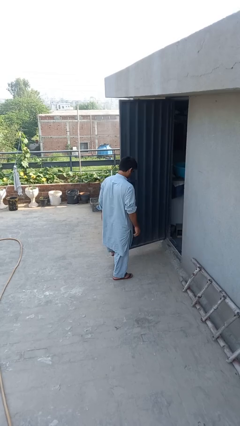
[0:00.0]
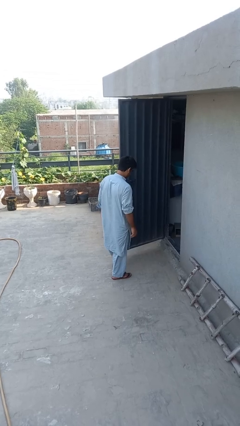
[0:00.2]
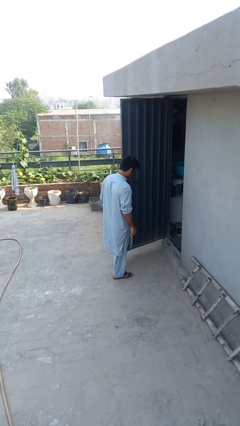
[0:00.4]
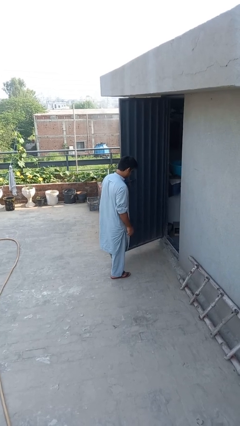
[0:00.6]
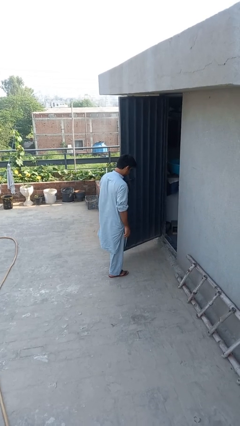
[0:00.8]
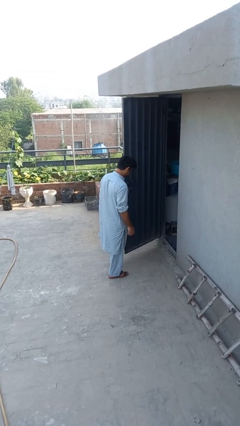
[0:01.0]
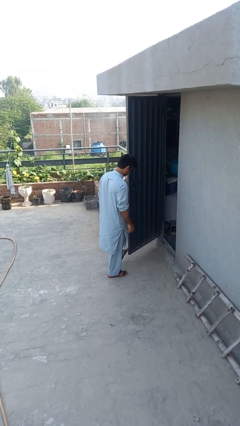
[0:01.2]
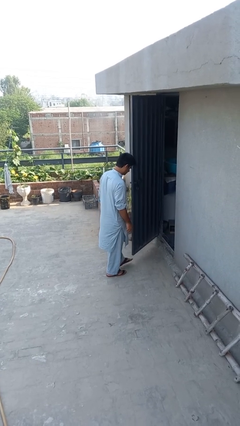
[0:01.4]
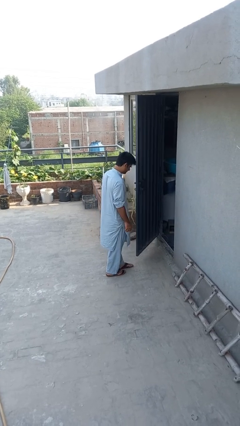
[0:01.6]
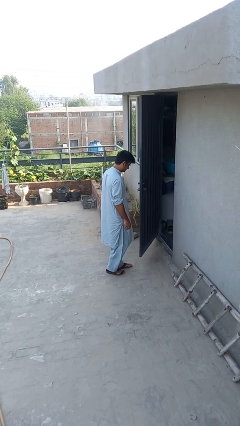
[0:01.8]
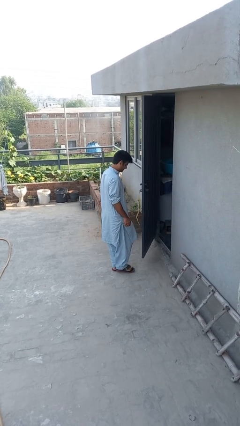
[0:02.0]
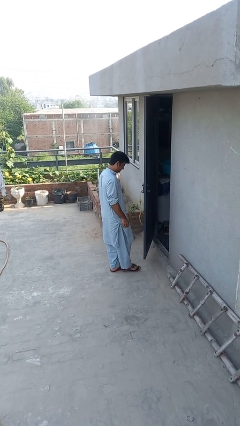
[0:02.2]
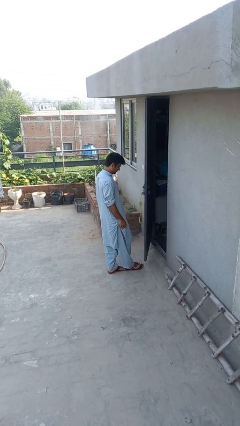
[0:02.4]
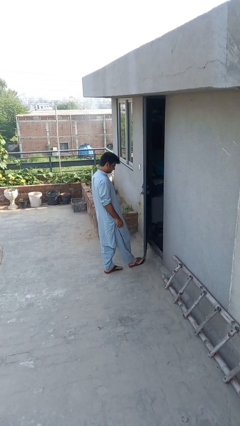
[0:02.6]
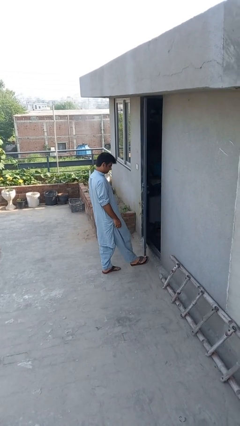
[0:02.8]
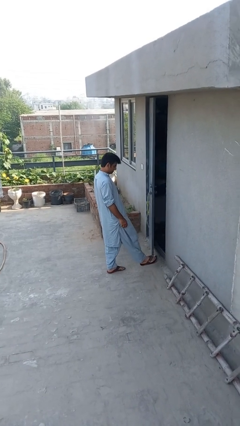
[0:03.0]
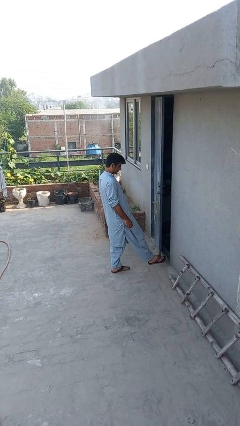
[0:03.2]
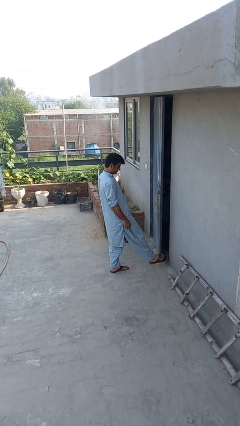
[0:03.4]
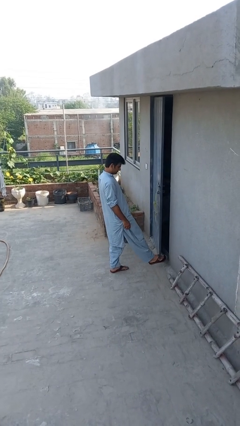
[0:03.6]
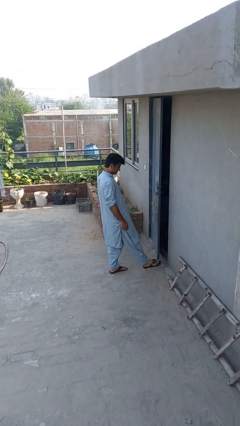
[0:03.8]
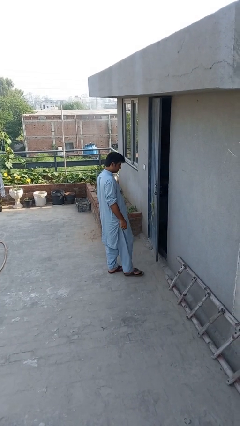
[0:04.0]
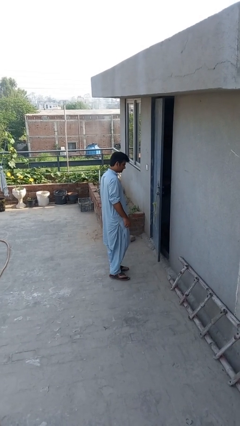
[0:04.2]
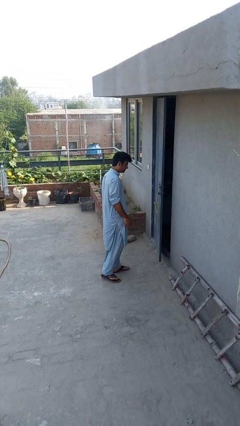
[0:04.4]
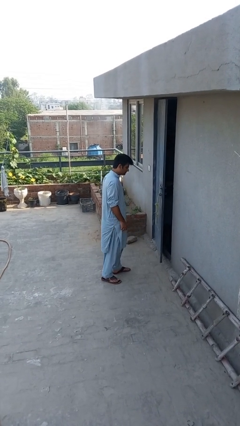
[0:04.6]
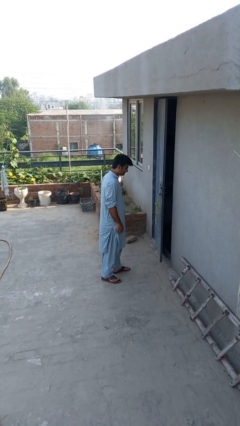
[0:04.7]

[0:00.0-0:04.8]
person closes door with foot

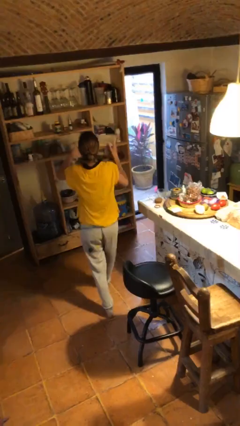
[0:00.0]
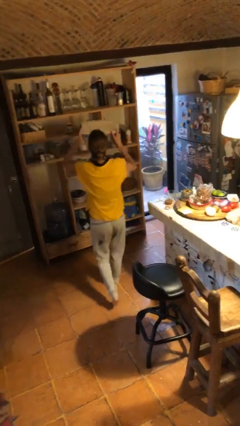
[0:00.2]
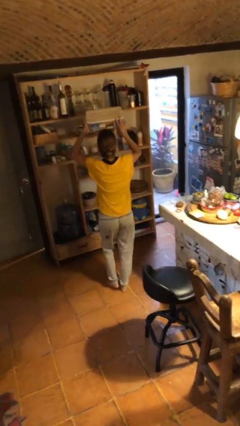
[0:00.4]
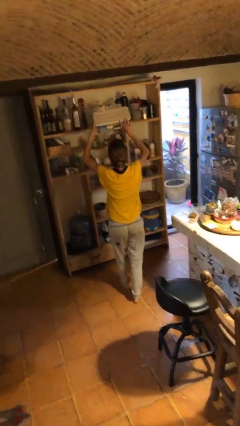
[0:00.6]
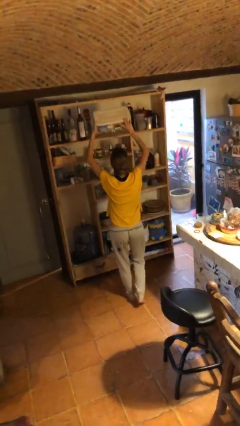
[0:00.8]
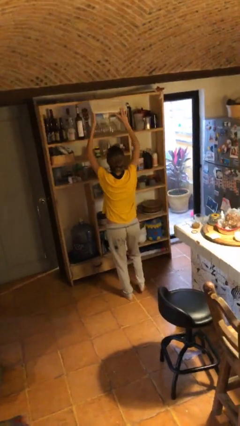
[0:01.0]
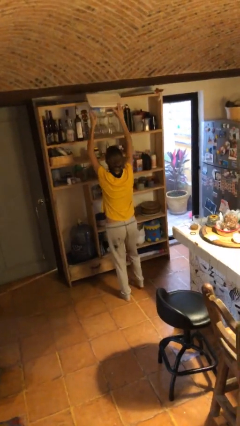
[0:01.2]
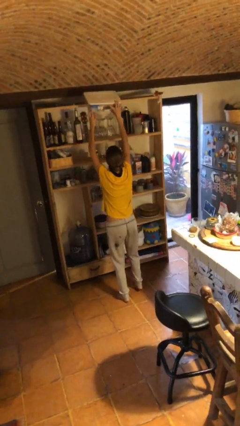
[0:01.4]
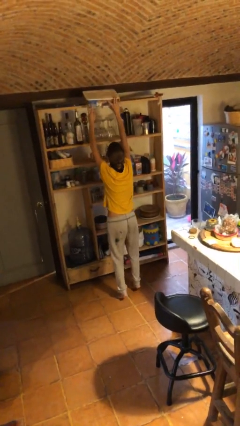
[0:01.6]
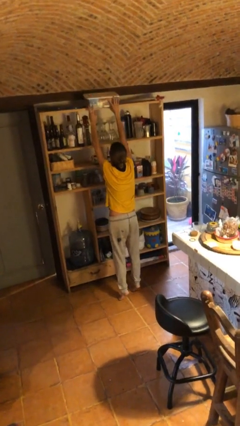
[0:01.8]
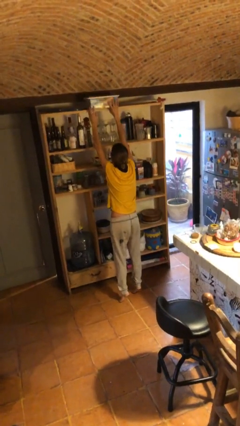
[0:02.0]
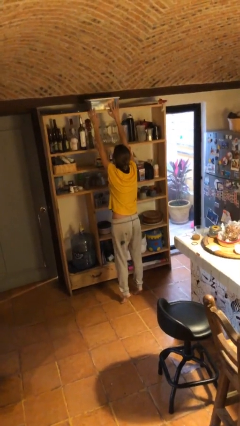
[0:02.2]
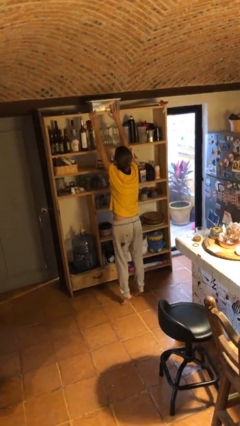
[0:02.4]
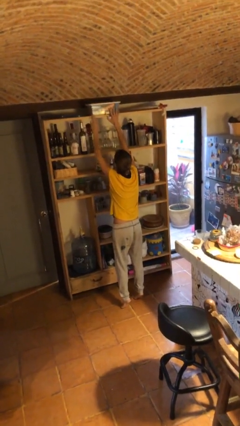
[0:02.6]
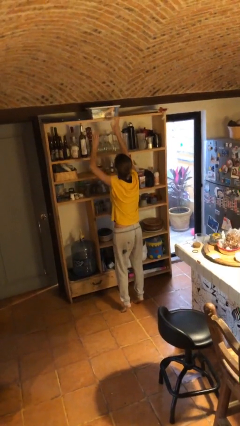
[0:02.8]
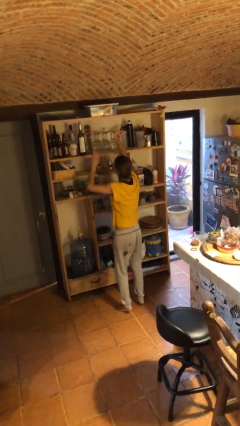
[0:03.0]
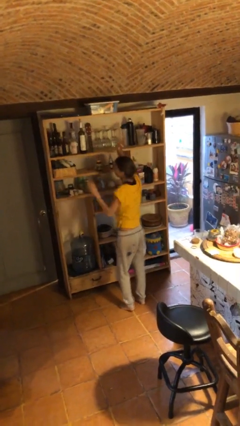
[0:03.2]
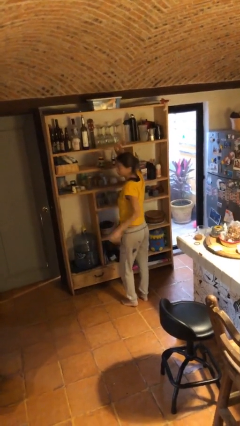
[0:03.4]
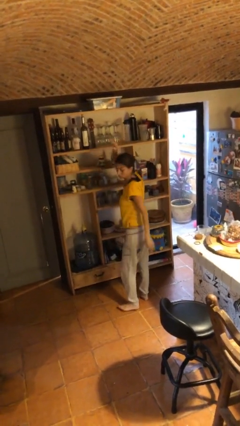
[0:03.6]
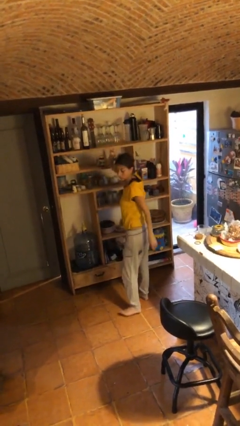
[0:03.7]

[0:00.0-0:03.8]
person puts down object on shelf

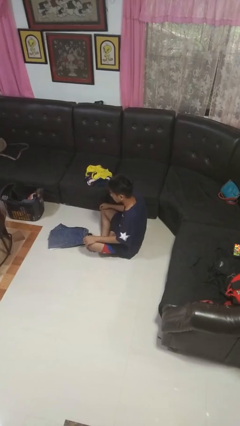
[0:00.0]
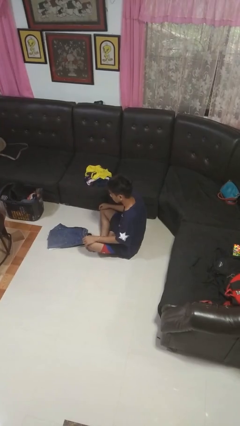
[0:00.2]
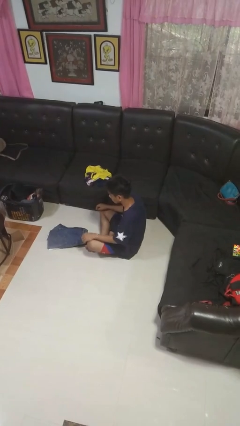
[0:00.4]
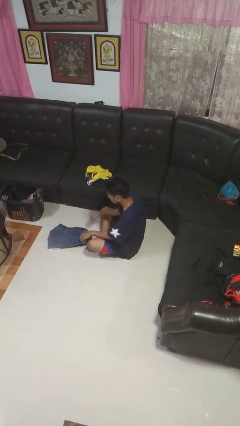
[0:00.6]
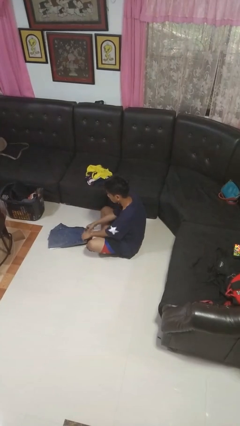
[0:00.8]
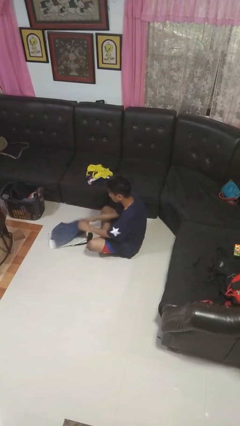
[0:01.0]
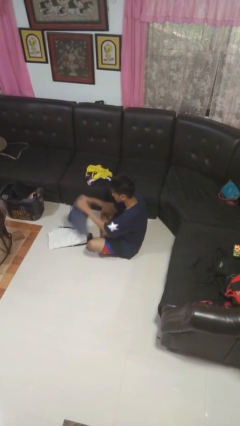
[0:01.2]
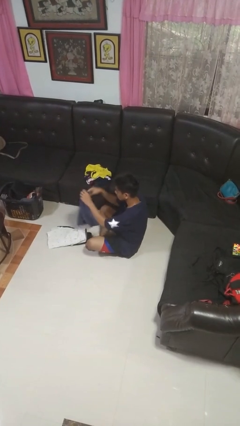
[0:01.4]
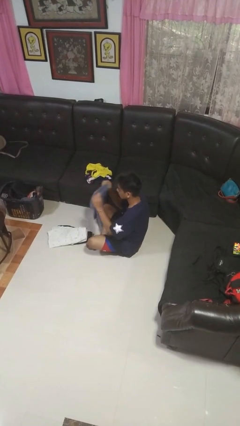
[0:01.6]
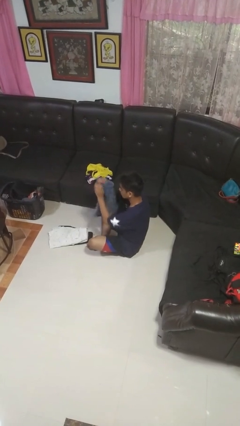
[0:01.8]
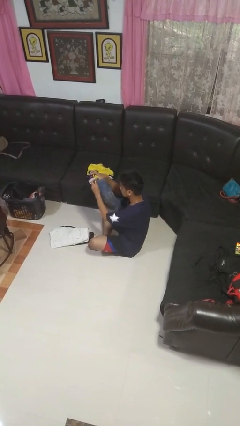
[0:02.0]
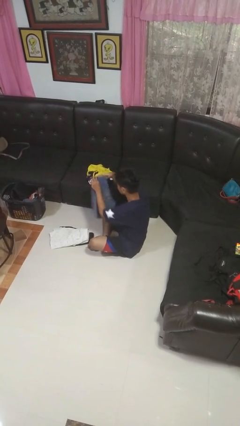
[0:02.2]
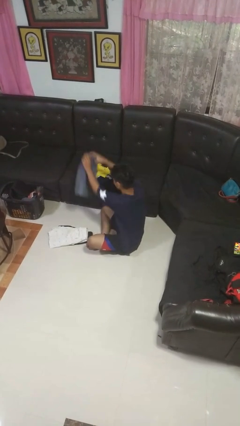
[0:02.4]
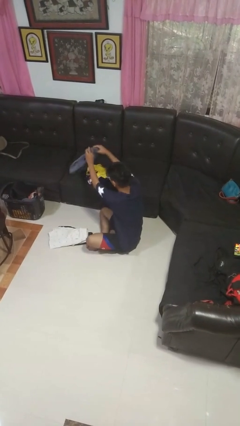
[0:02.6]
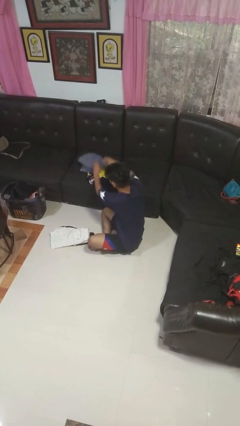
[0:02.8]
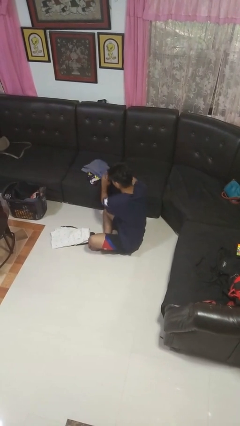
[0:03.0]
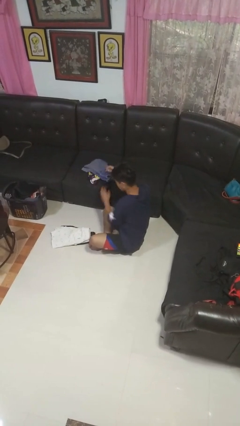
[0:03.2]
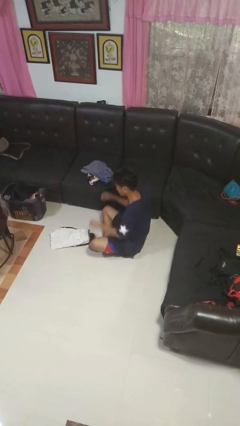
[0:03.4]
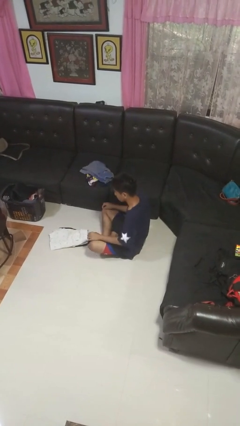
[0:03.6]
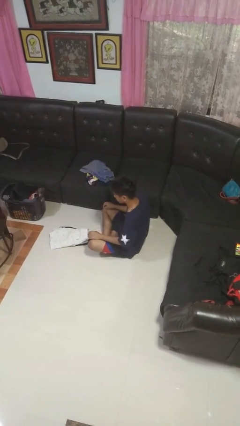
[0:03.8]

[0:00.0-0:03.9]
person folds pants

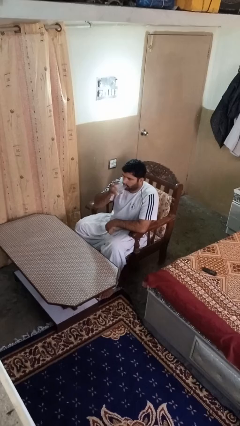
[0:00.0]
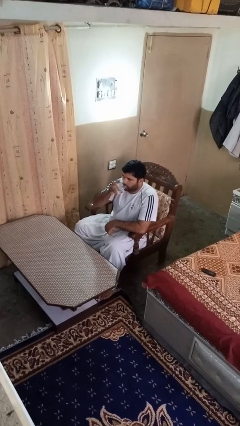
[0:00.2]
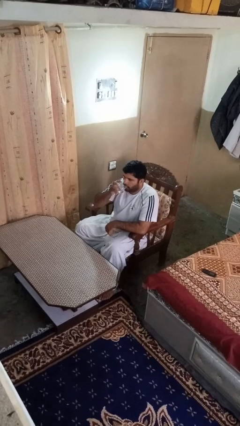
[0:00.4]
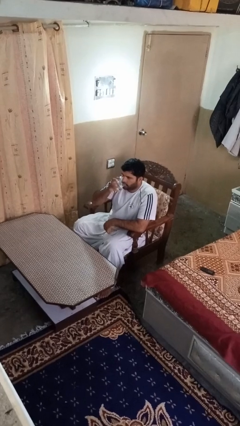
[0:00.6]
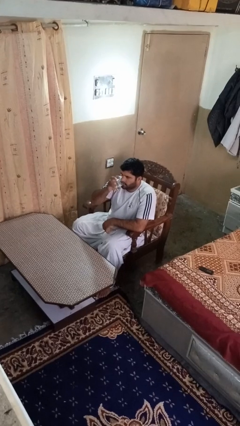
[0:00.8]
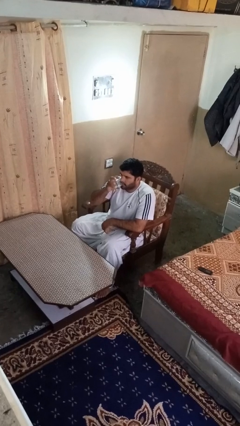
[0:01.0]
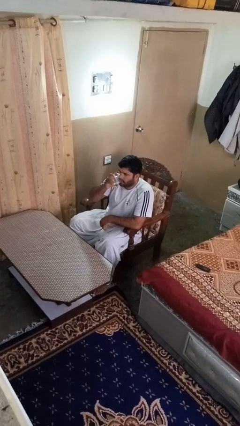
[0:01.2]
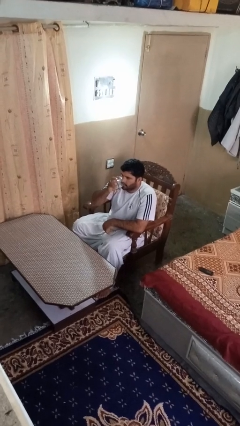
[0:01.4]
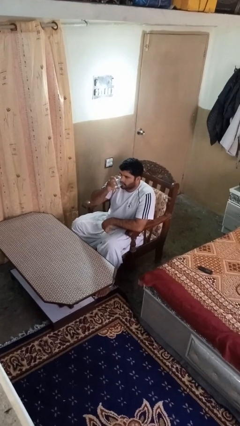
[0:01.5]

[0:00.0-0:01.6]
person drinks from shotglass

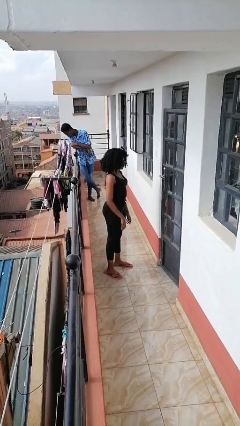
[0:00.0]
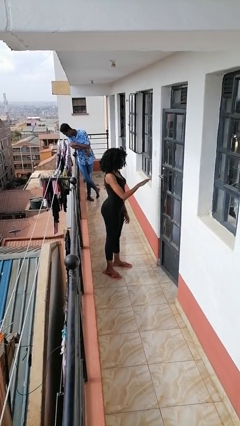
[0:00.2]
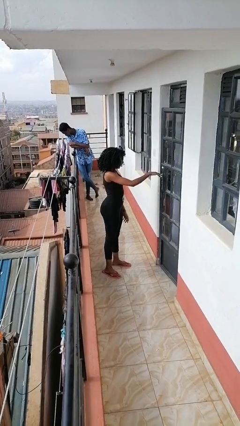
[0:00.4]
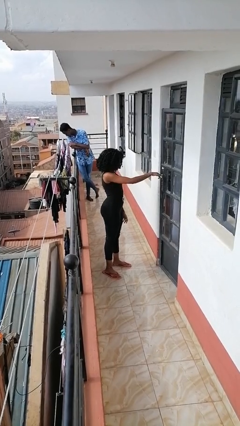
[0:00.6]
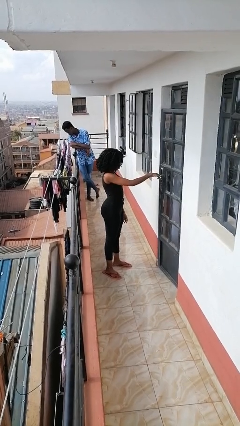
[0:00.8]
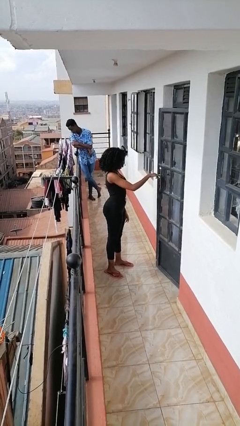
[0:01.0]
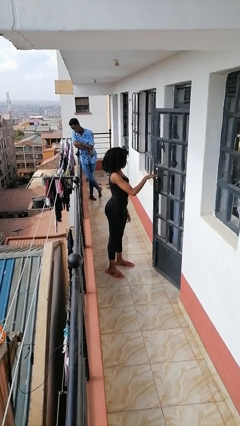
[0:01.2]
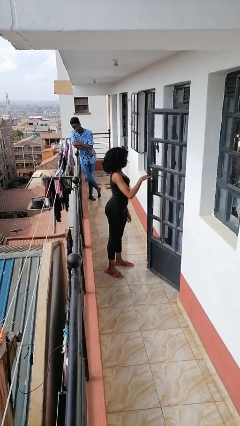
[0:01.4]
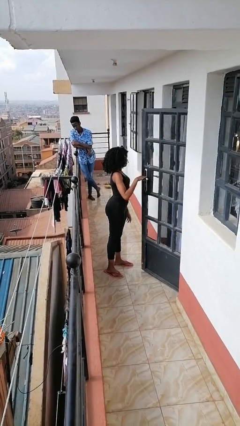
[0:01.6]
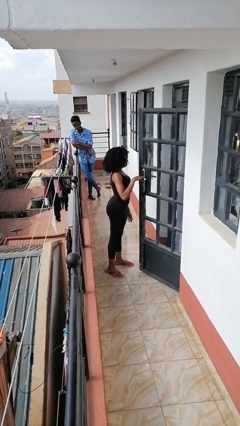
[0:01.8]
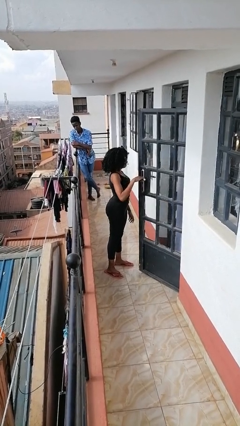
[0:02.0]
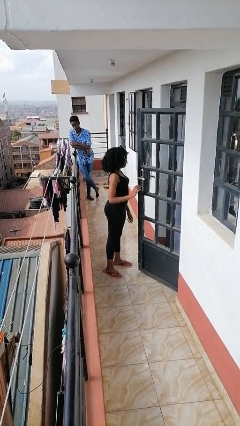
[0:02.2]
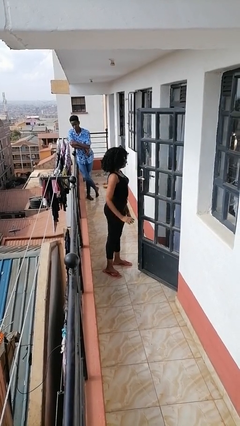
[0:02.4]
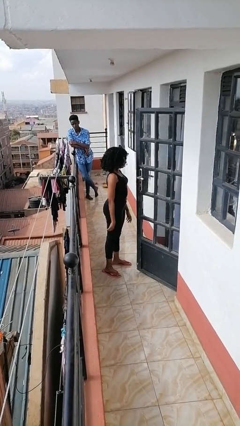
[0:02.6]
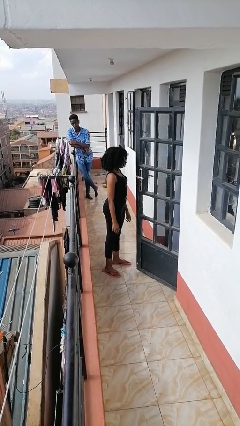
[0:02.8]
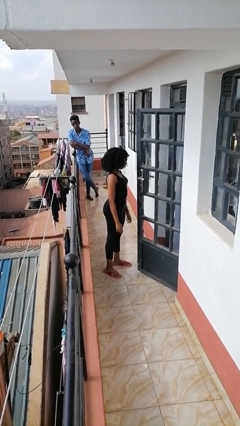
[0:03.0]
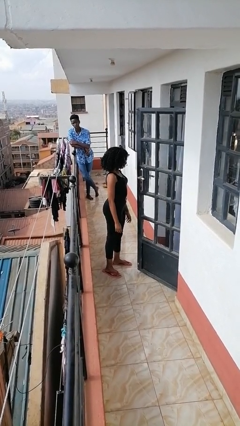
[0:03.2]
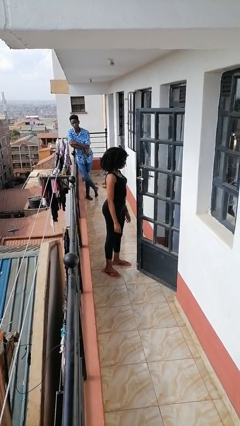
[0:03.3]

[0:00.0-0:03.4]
person opens facility door

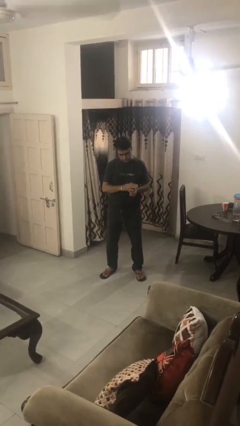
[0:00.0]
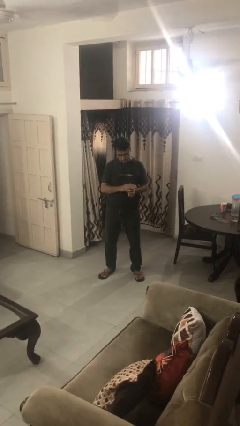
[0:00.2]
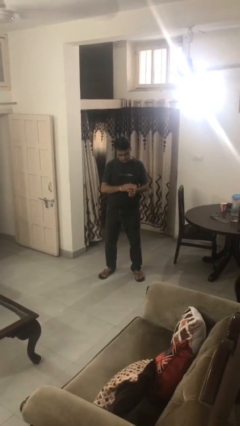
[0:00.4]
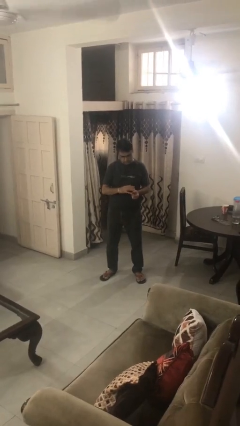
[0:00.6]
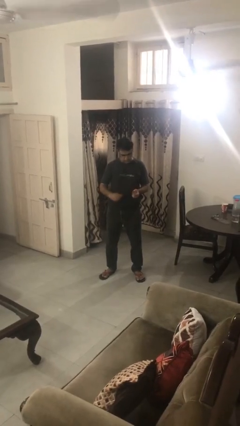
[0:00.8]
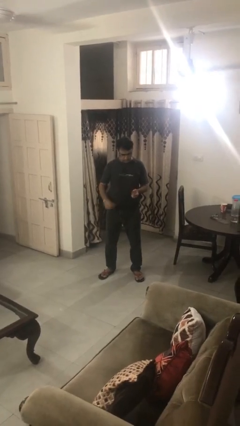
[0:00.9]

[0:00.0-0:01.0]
person takes off ring
